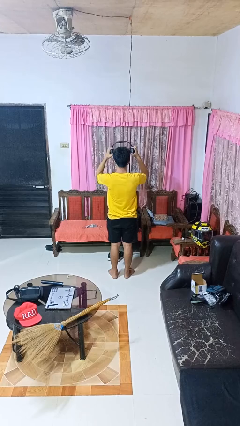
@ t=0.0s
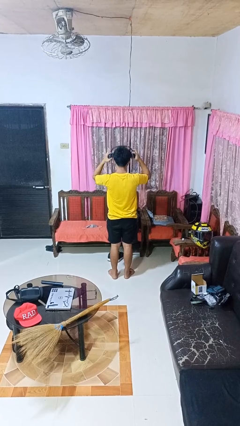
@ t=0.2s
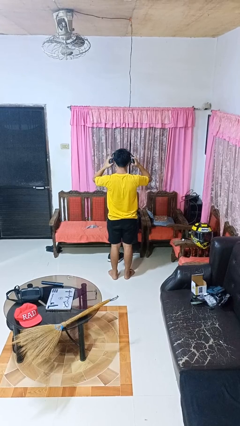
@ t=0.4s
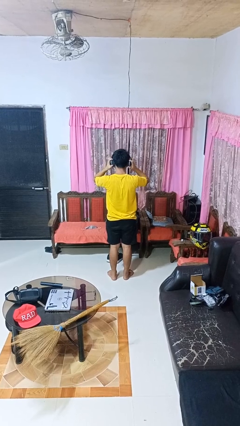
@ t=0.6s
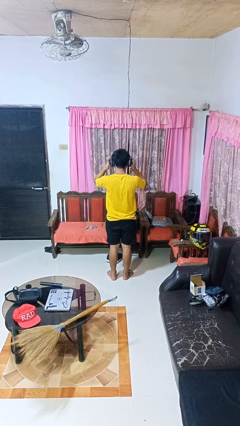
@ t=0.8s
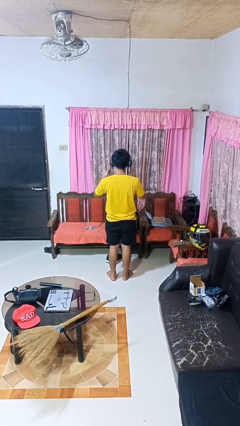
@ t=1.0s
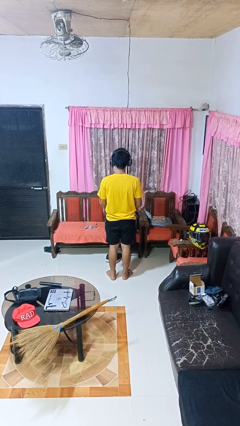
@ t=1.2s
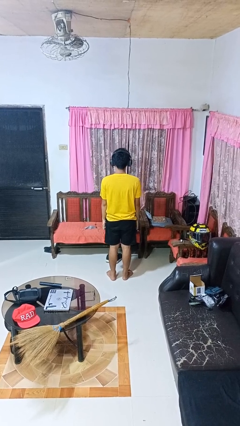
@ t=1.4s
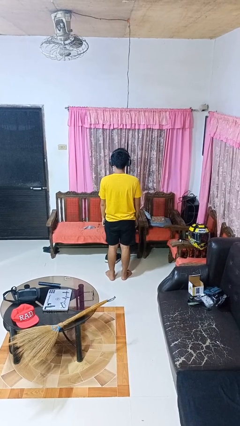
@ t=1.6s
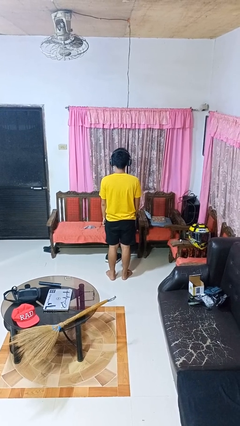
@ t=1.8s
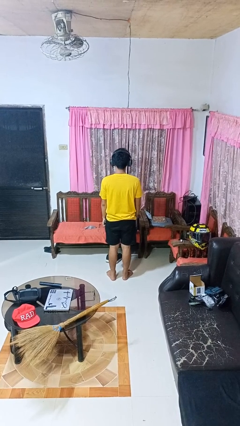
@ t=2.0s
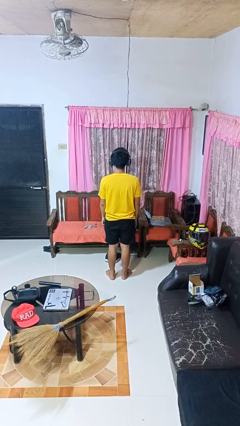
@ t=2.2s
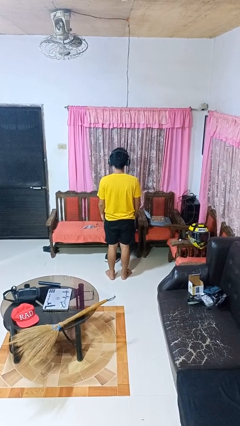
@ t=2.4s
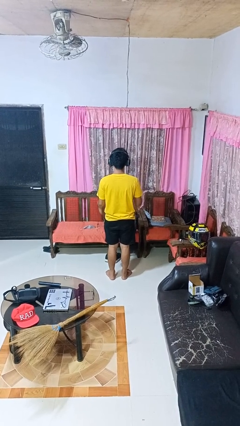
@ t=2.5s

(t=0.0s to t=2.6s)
person puts on headphones

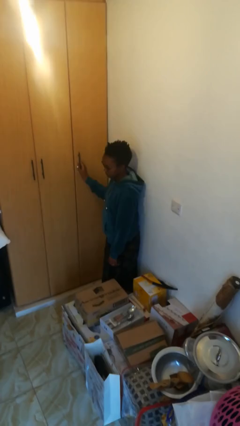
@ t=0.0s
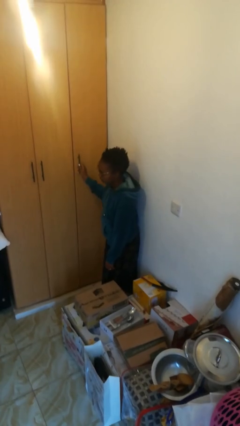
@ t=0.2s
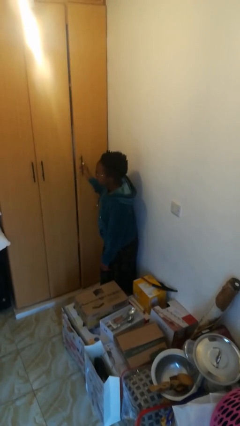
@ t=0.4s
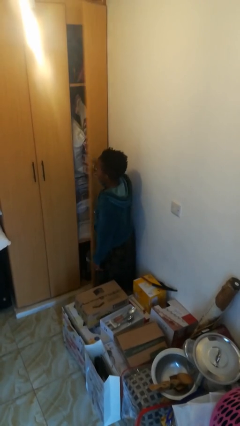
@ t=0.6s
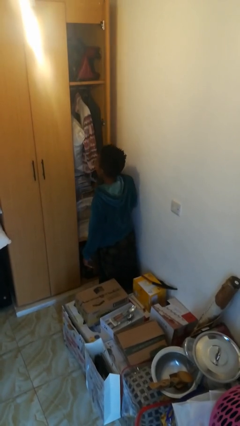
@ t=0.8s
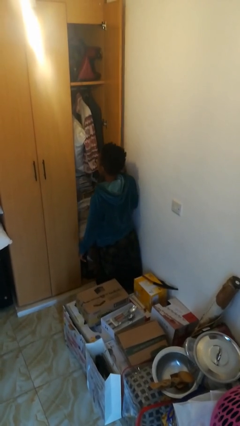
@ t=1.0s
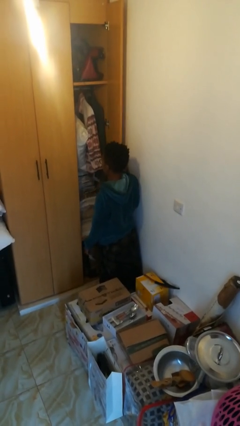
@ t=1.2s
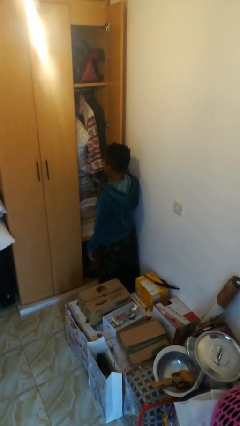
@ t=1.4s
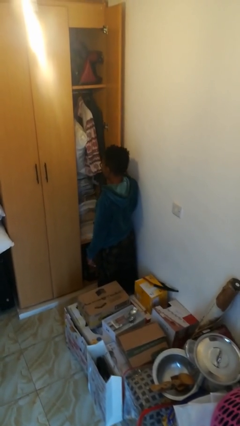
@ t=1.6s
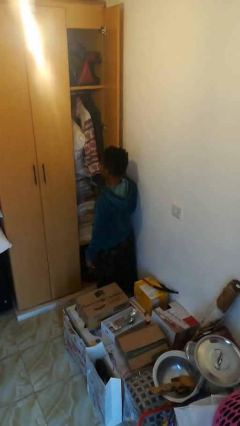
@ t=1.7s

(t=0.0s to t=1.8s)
person opens closet door

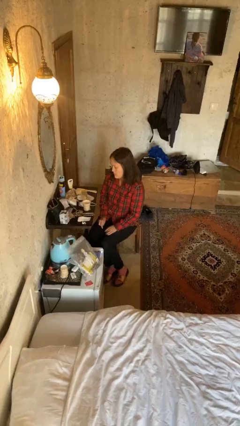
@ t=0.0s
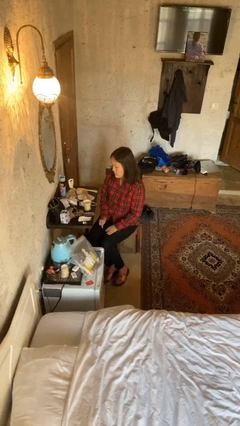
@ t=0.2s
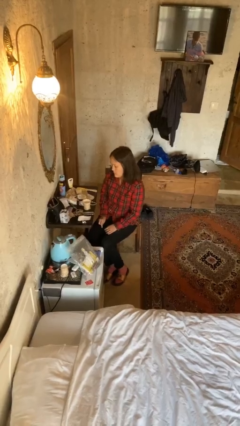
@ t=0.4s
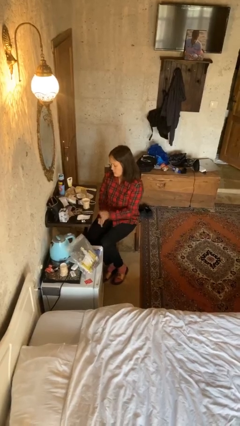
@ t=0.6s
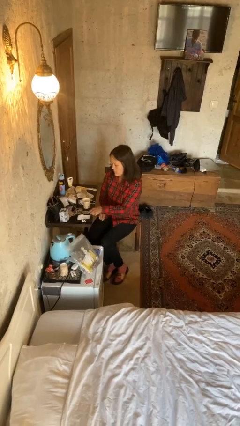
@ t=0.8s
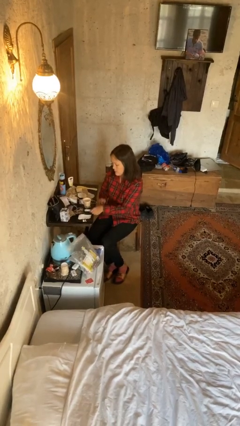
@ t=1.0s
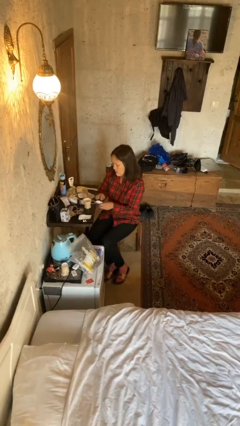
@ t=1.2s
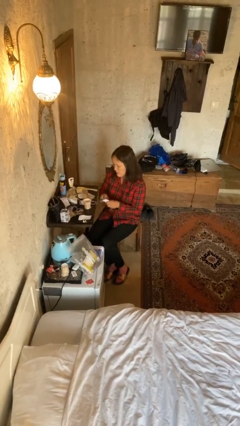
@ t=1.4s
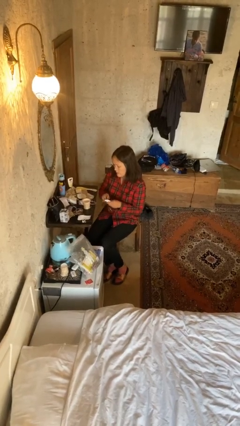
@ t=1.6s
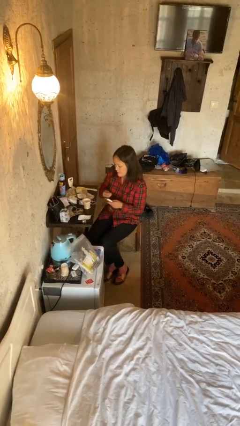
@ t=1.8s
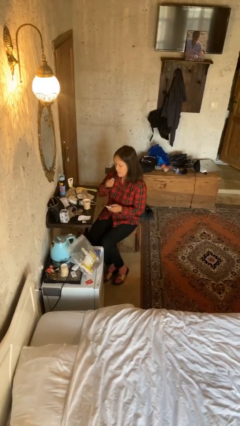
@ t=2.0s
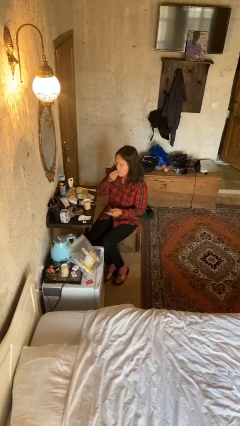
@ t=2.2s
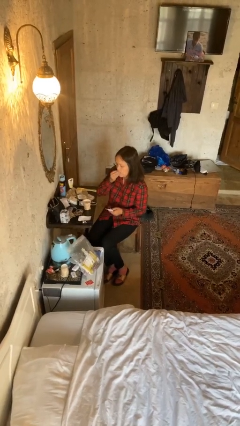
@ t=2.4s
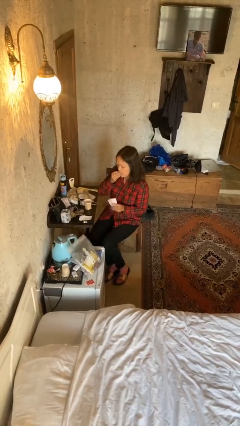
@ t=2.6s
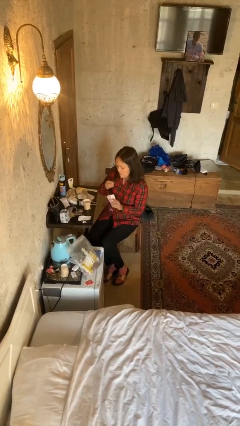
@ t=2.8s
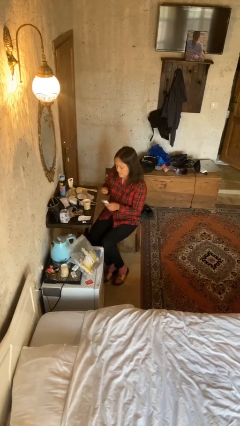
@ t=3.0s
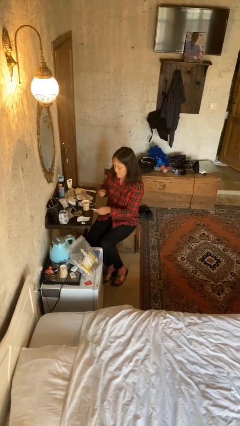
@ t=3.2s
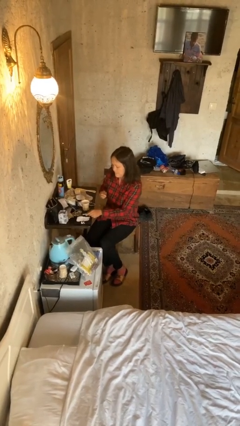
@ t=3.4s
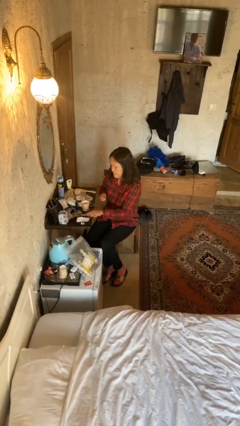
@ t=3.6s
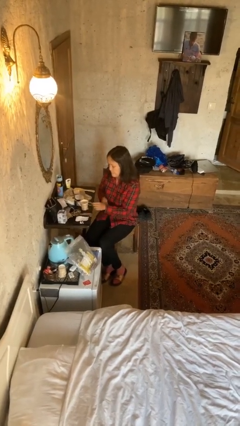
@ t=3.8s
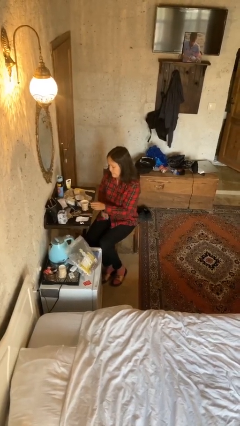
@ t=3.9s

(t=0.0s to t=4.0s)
person takes medicine pills

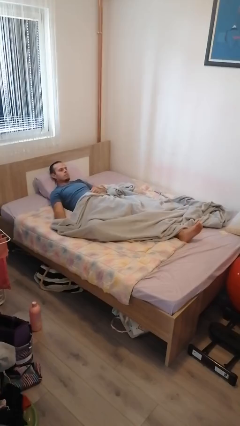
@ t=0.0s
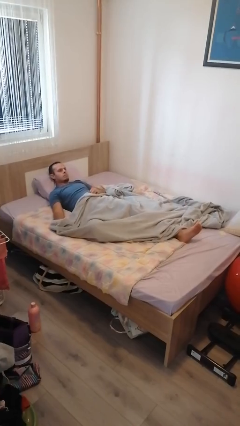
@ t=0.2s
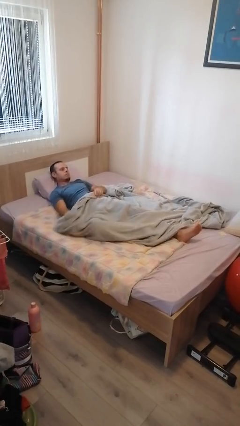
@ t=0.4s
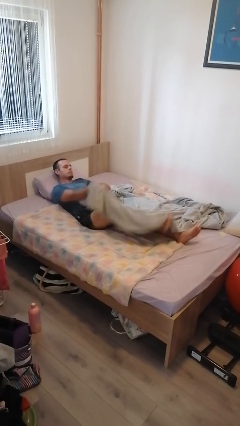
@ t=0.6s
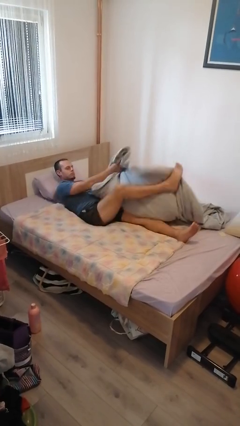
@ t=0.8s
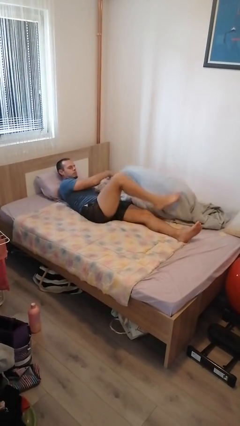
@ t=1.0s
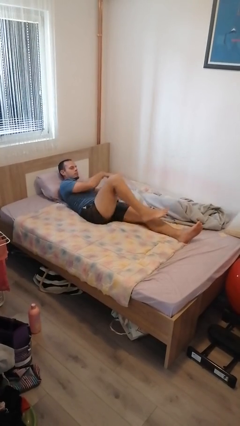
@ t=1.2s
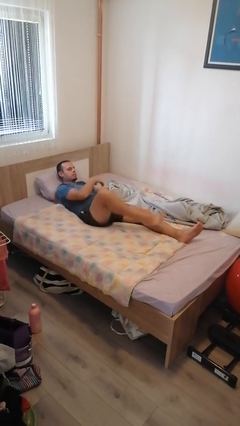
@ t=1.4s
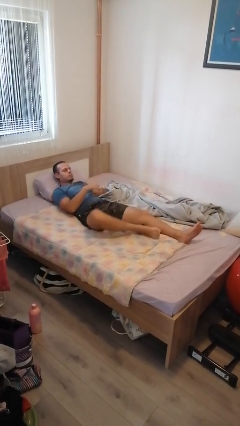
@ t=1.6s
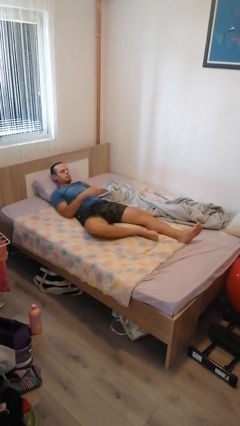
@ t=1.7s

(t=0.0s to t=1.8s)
person uncovers with bedsheets

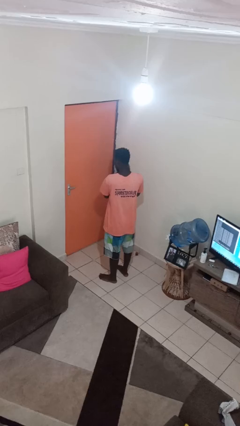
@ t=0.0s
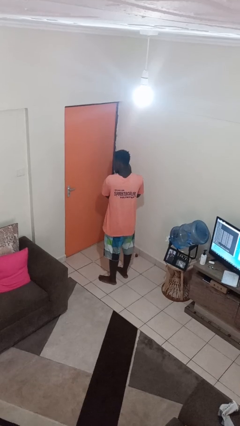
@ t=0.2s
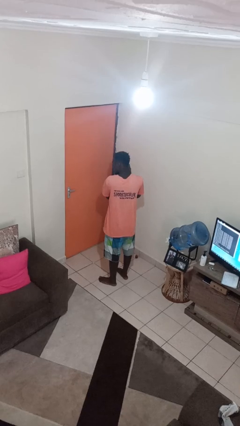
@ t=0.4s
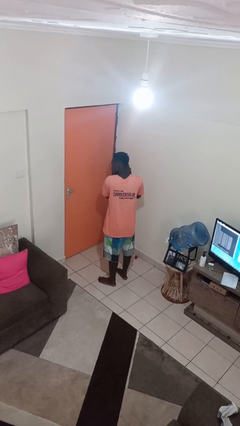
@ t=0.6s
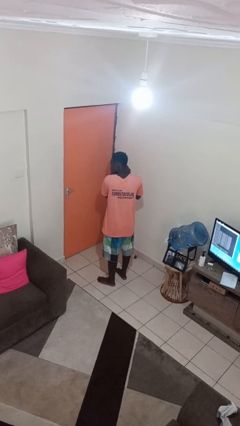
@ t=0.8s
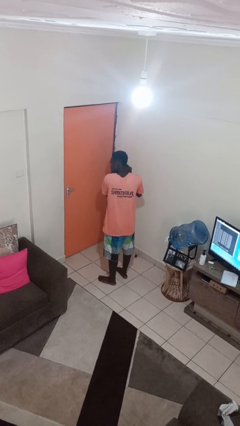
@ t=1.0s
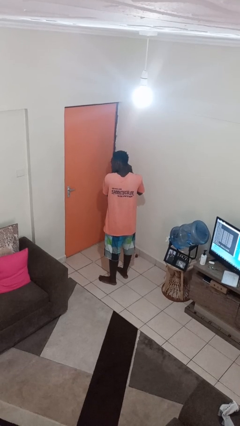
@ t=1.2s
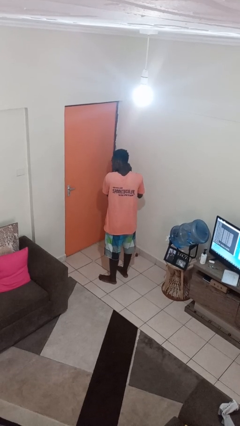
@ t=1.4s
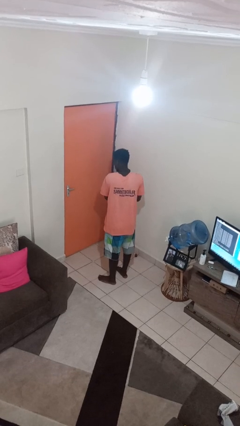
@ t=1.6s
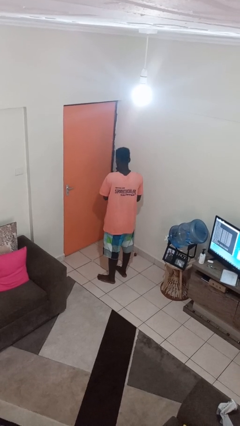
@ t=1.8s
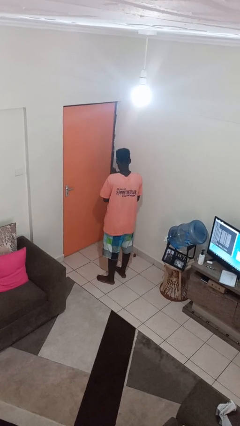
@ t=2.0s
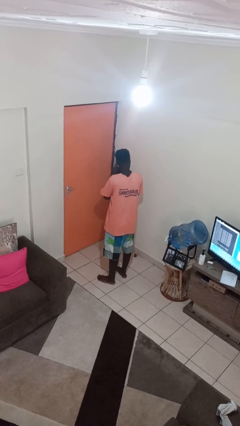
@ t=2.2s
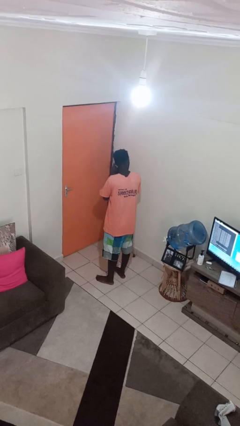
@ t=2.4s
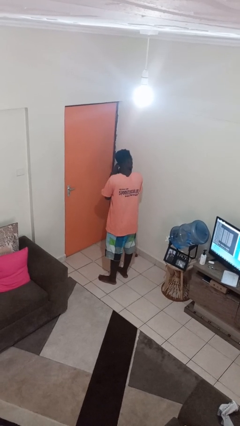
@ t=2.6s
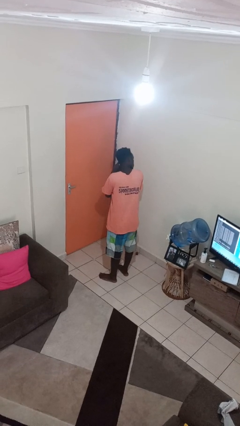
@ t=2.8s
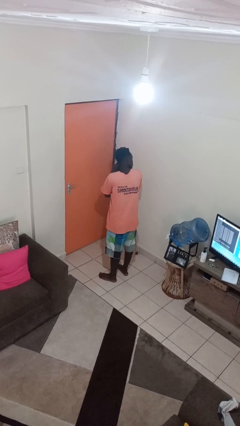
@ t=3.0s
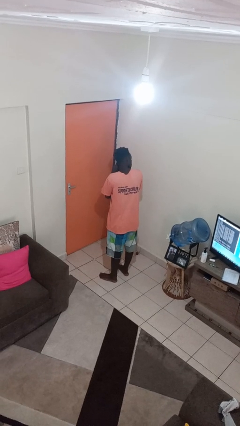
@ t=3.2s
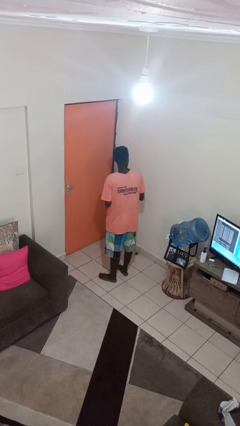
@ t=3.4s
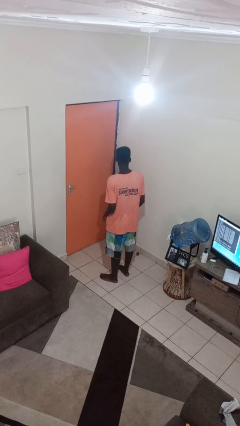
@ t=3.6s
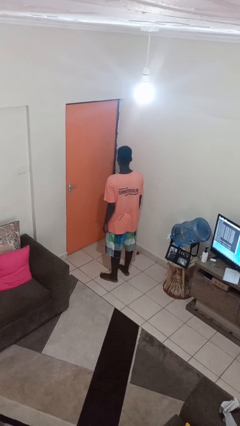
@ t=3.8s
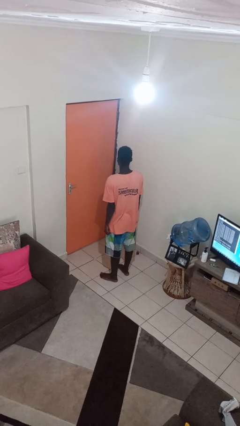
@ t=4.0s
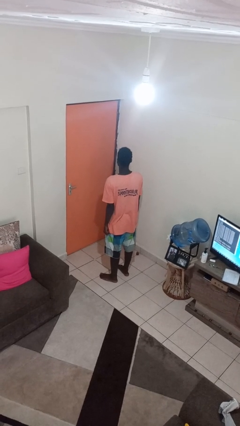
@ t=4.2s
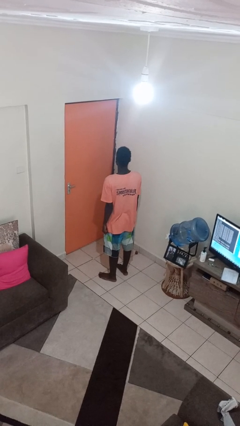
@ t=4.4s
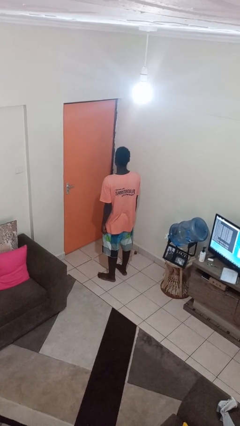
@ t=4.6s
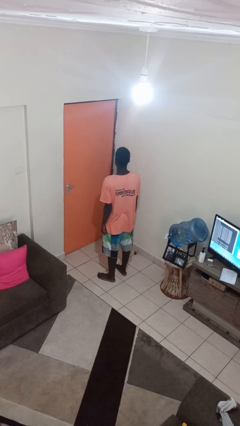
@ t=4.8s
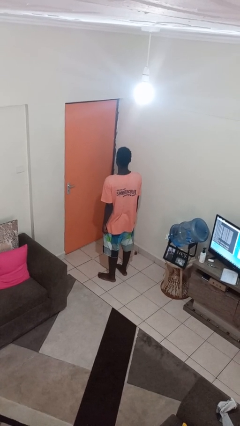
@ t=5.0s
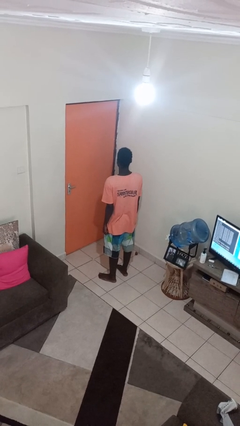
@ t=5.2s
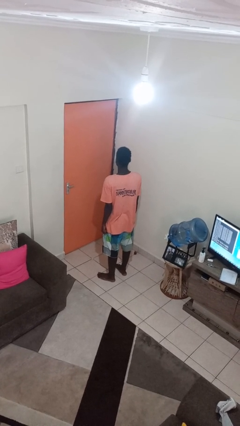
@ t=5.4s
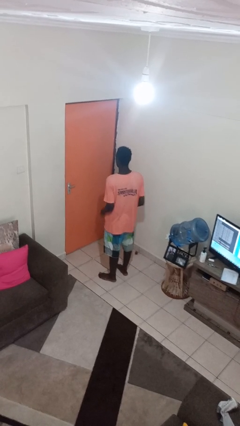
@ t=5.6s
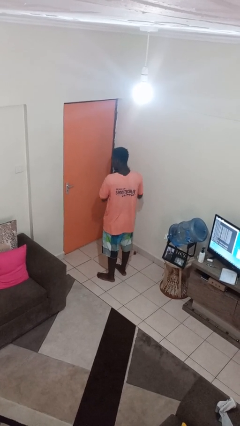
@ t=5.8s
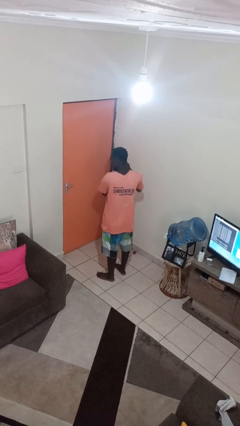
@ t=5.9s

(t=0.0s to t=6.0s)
person puts on earrings

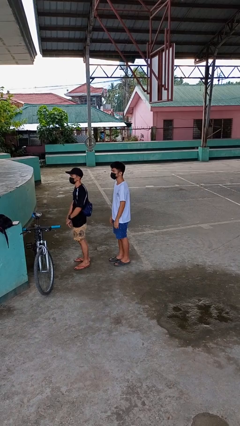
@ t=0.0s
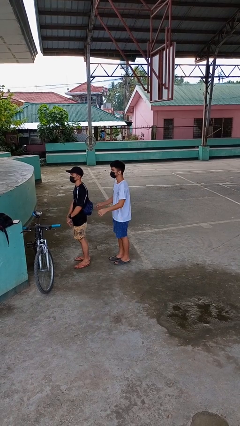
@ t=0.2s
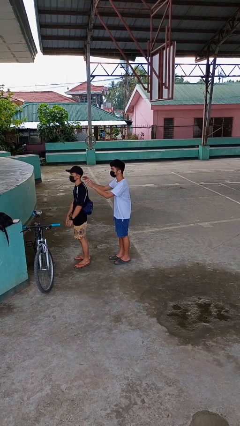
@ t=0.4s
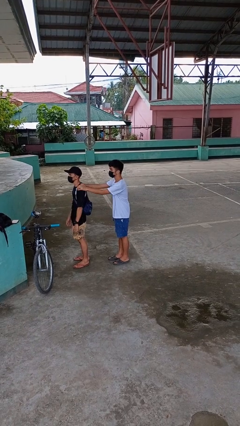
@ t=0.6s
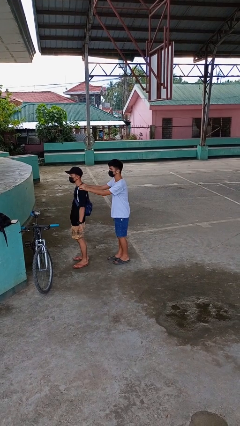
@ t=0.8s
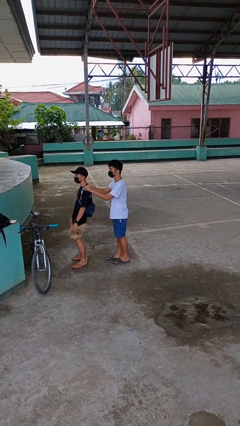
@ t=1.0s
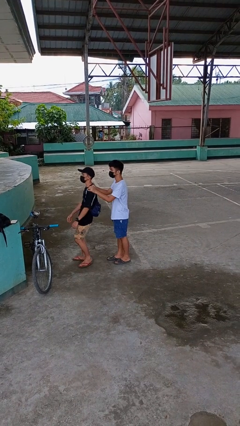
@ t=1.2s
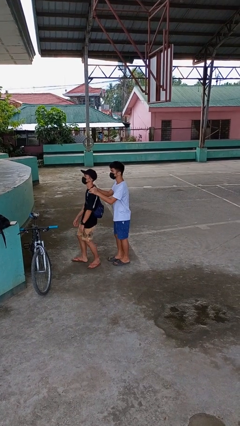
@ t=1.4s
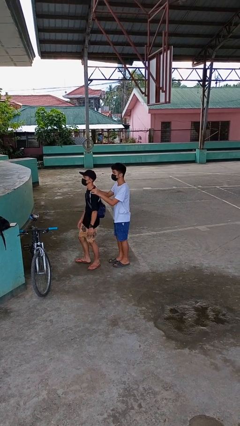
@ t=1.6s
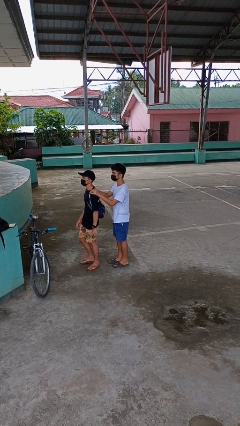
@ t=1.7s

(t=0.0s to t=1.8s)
person grabs person by shoulder
